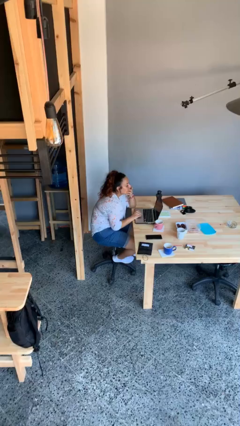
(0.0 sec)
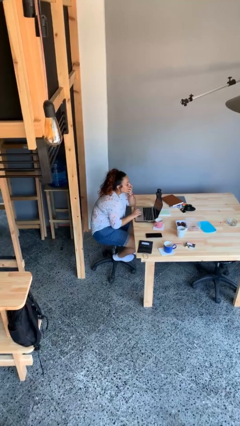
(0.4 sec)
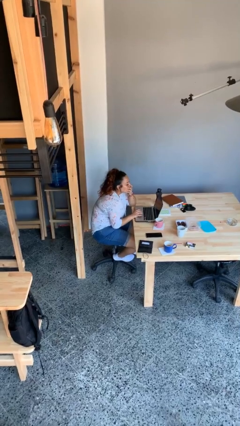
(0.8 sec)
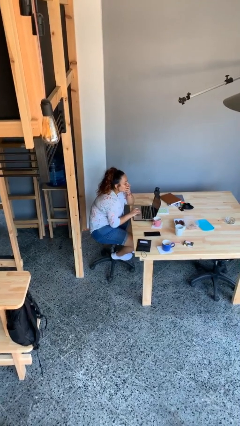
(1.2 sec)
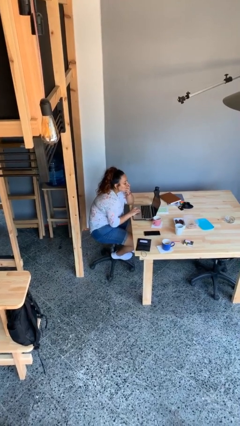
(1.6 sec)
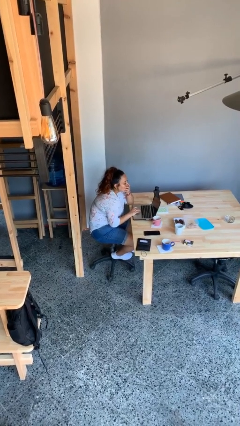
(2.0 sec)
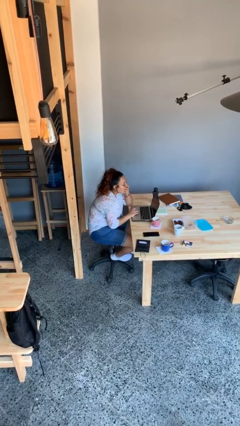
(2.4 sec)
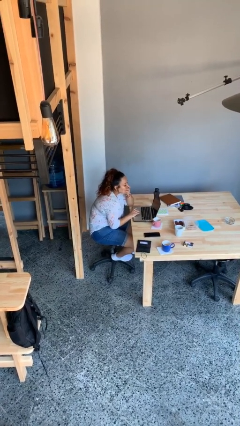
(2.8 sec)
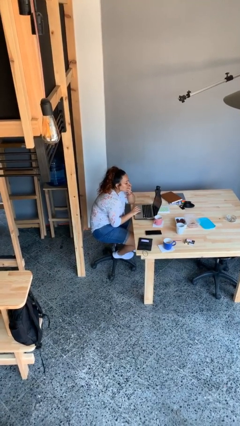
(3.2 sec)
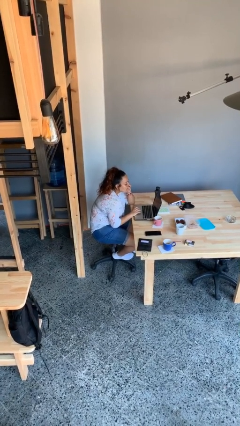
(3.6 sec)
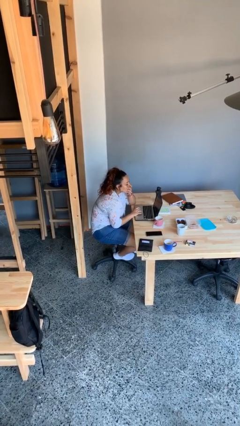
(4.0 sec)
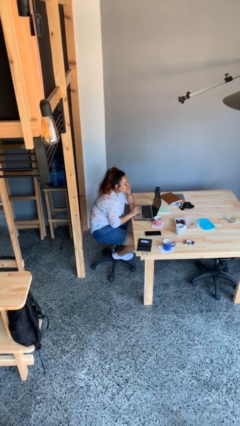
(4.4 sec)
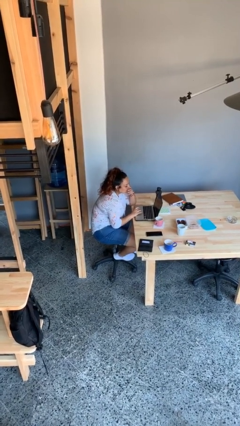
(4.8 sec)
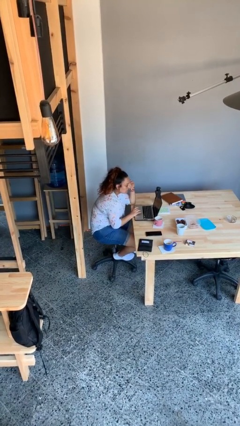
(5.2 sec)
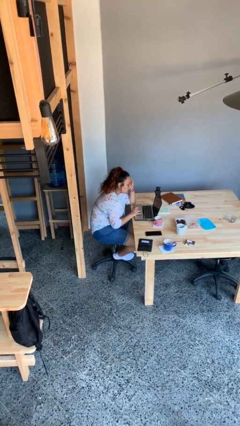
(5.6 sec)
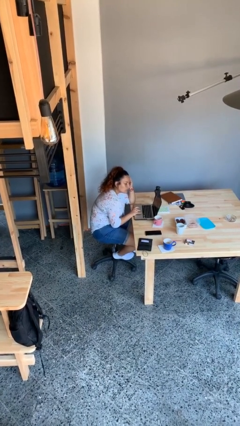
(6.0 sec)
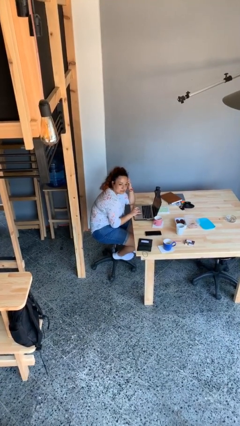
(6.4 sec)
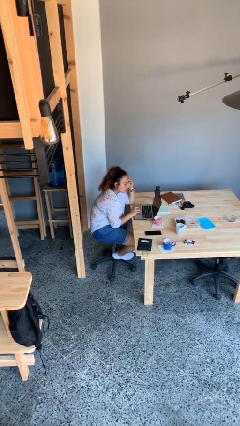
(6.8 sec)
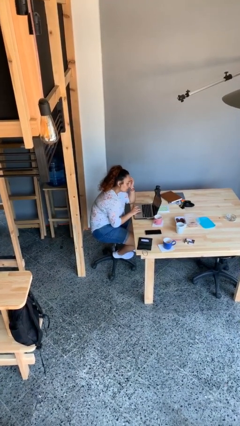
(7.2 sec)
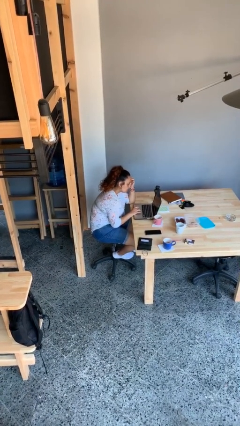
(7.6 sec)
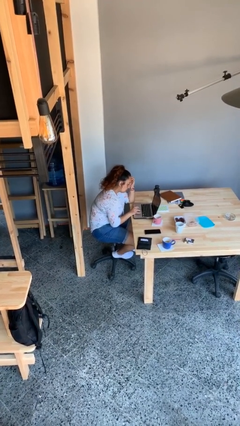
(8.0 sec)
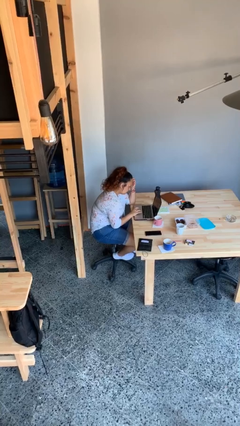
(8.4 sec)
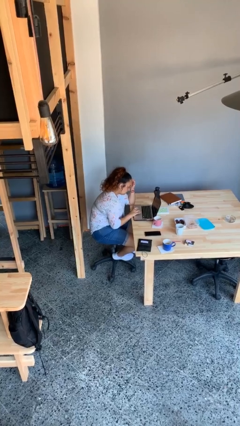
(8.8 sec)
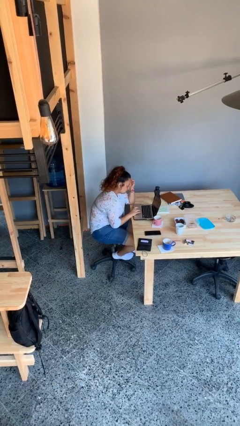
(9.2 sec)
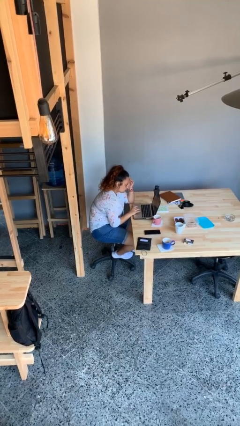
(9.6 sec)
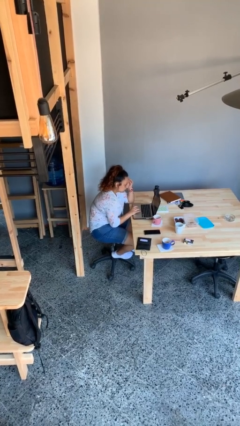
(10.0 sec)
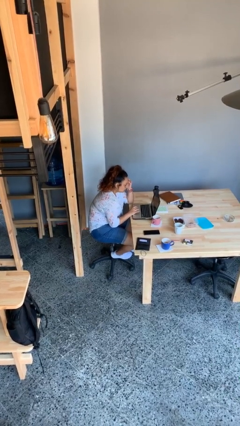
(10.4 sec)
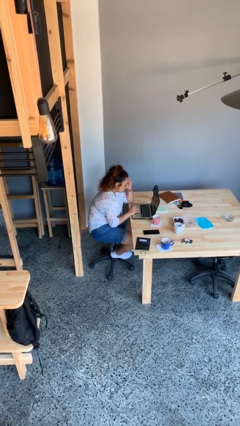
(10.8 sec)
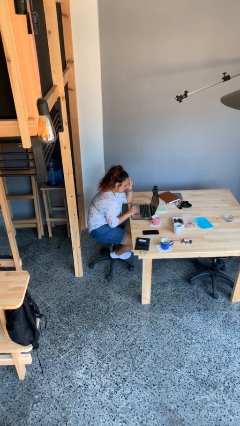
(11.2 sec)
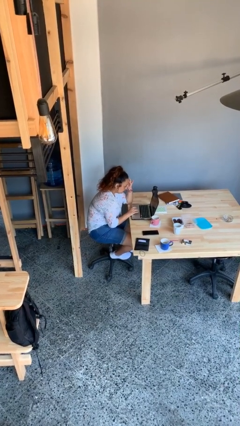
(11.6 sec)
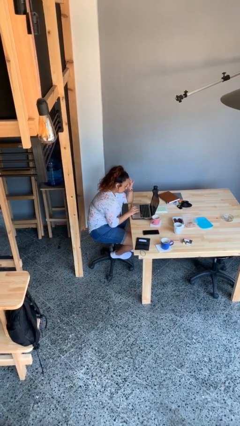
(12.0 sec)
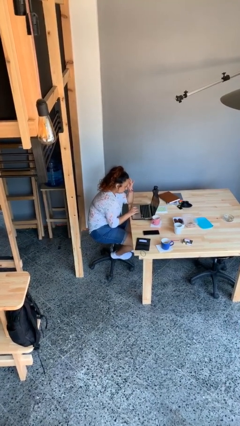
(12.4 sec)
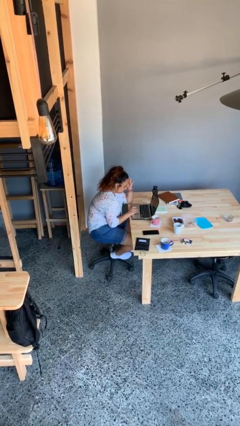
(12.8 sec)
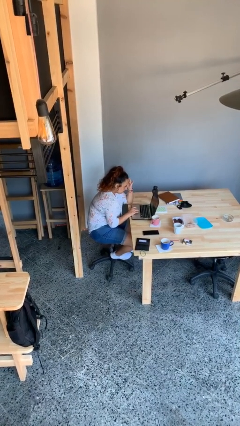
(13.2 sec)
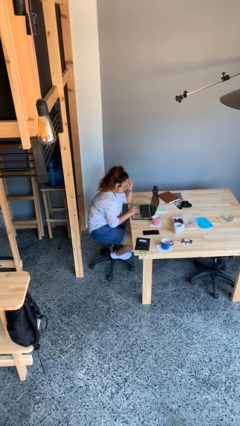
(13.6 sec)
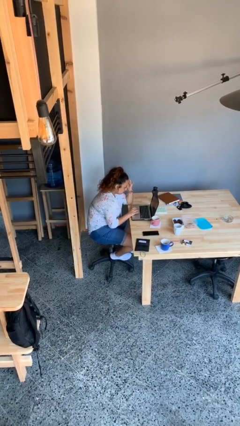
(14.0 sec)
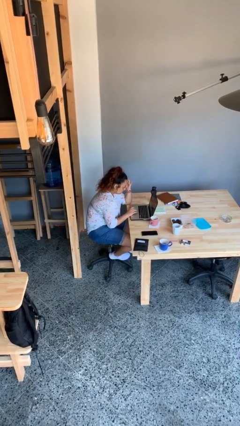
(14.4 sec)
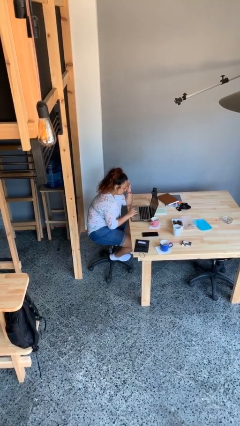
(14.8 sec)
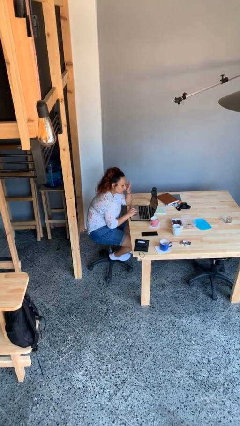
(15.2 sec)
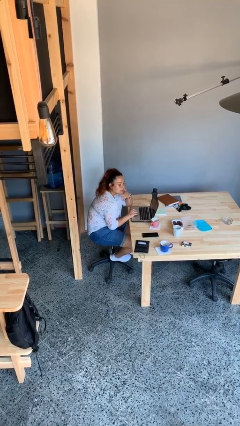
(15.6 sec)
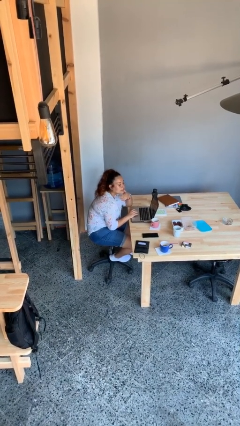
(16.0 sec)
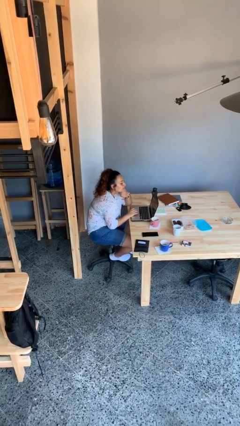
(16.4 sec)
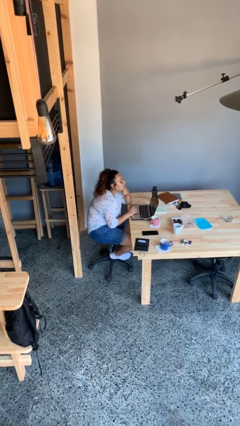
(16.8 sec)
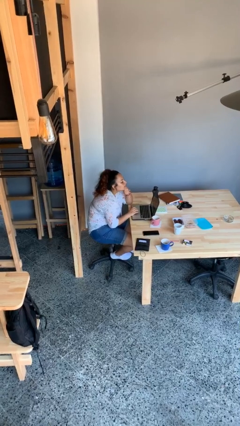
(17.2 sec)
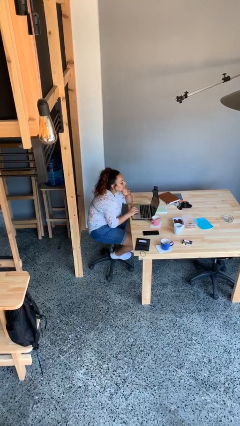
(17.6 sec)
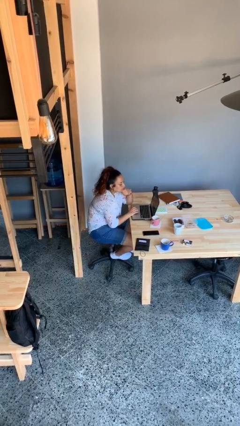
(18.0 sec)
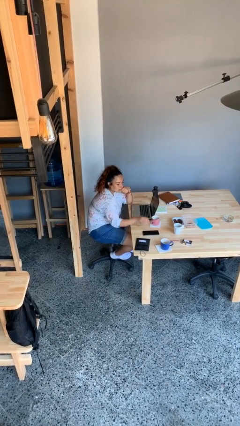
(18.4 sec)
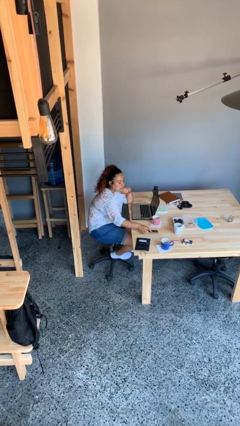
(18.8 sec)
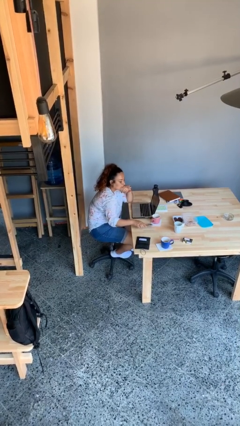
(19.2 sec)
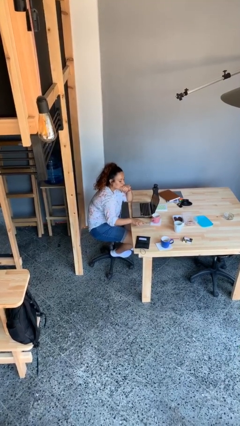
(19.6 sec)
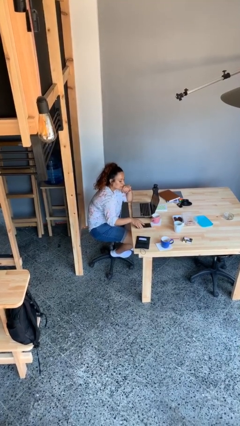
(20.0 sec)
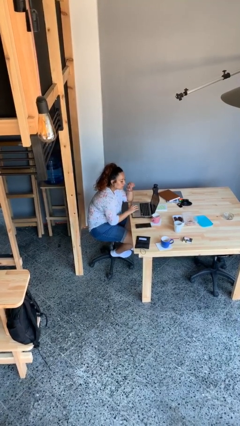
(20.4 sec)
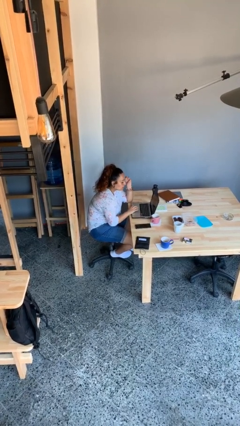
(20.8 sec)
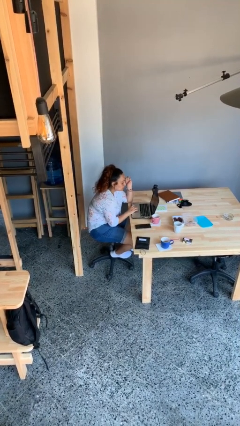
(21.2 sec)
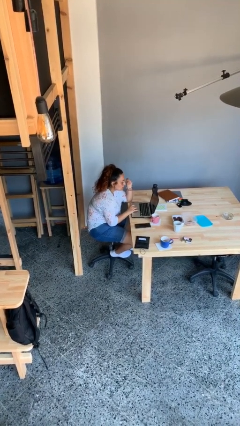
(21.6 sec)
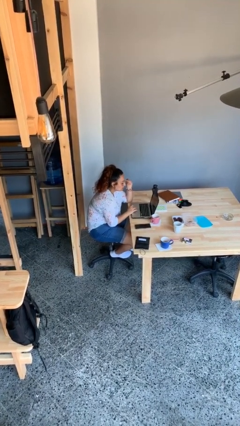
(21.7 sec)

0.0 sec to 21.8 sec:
person interacts with laptop

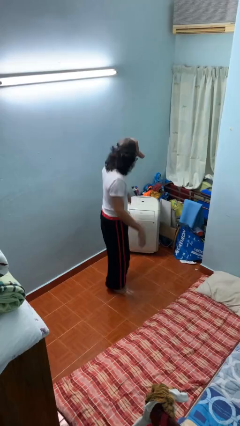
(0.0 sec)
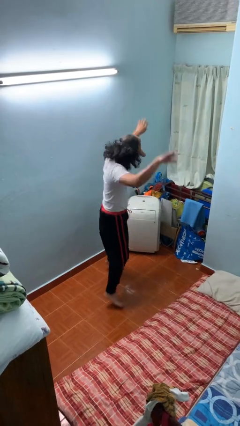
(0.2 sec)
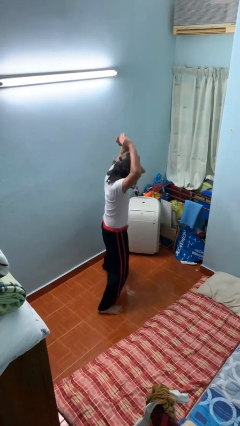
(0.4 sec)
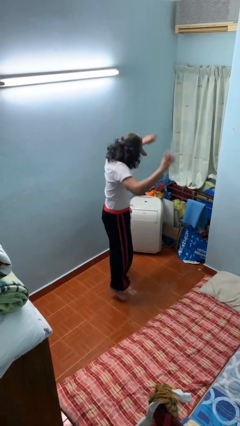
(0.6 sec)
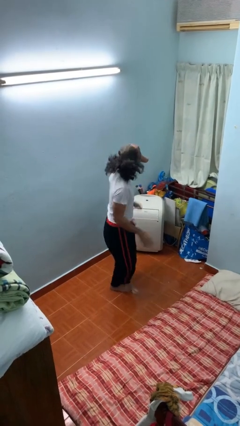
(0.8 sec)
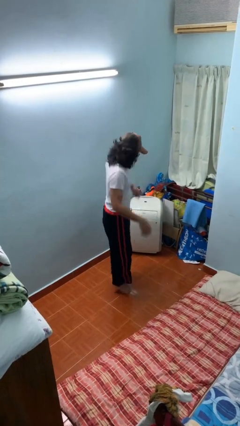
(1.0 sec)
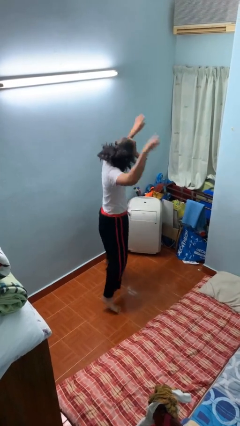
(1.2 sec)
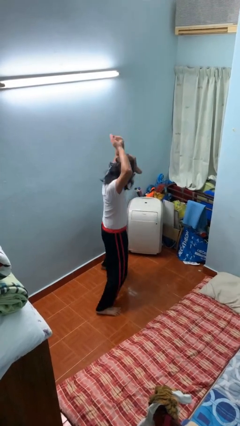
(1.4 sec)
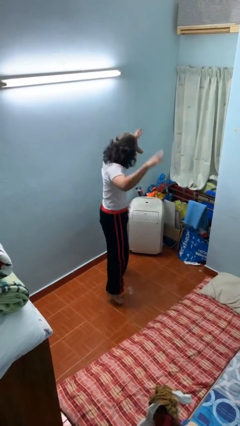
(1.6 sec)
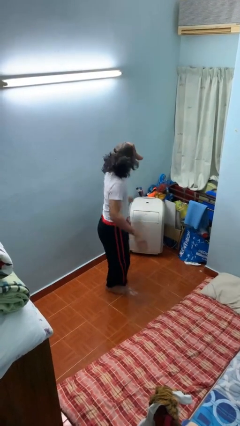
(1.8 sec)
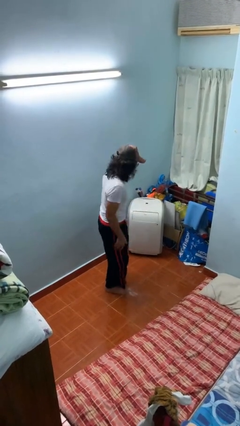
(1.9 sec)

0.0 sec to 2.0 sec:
person exercises with jumping jacks

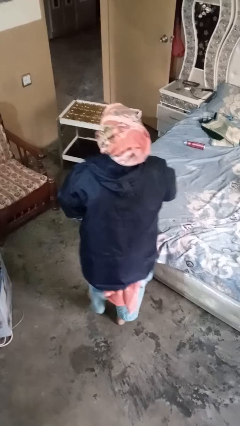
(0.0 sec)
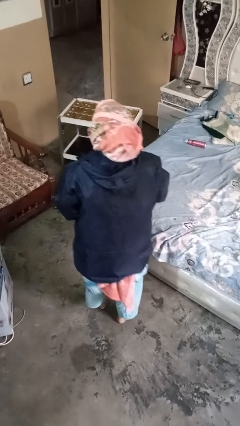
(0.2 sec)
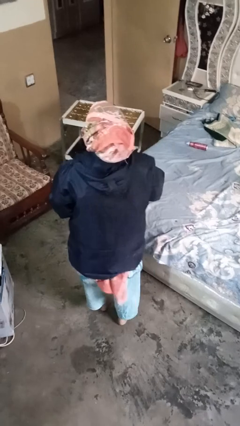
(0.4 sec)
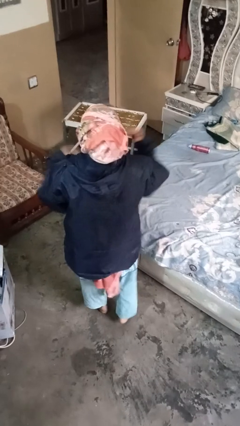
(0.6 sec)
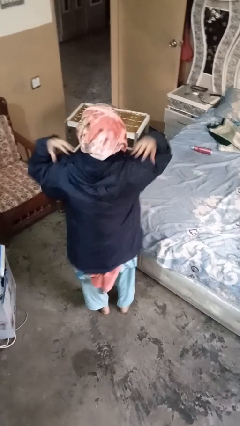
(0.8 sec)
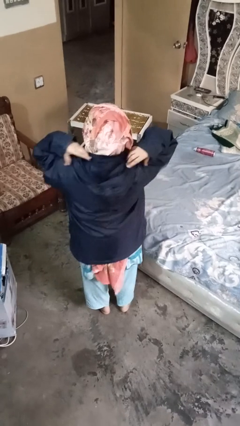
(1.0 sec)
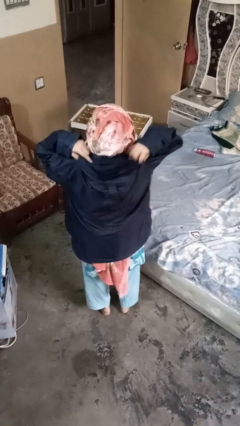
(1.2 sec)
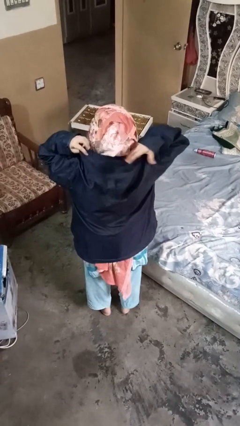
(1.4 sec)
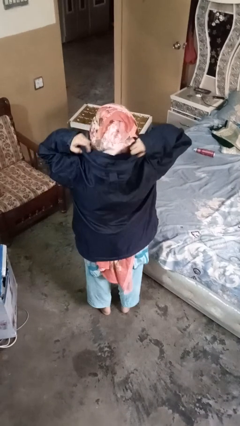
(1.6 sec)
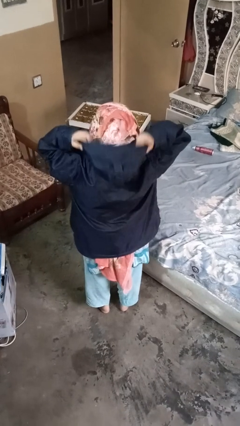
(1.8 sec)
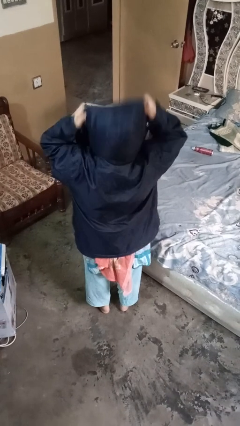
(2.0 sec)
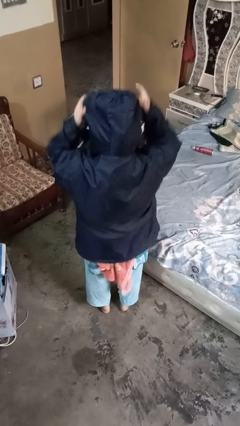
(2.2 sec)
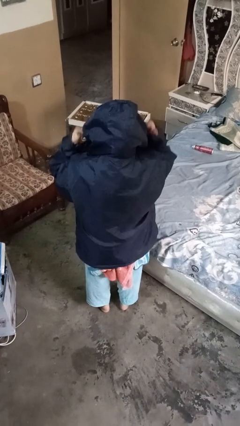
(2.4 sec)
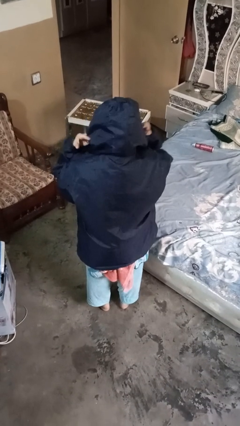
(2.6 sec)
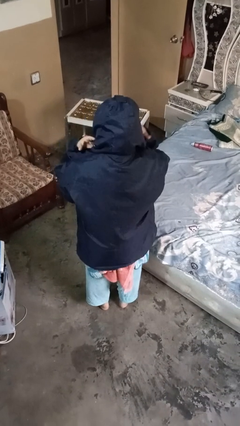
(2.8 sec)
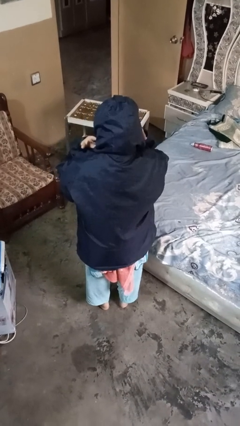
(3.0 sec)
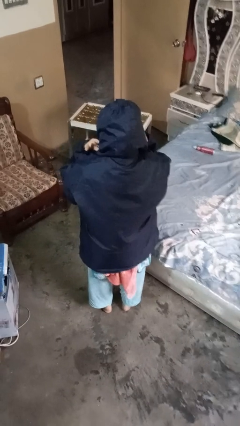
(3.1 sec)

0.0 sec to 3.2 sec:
person puts on hoodie

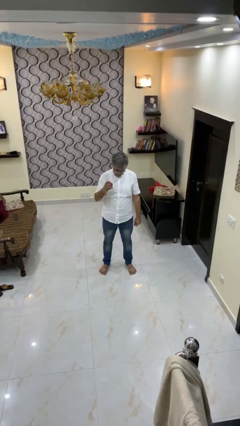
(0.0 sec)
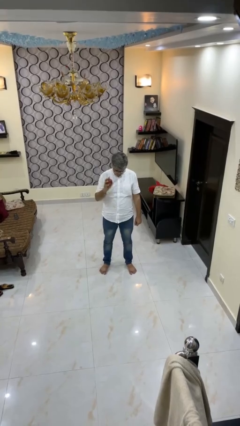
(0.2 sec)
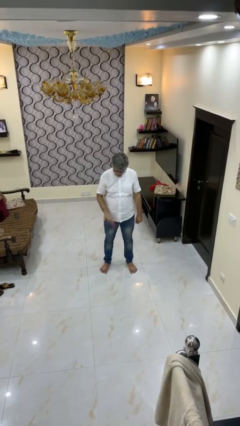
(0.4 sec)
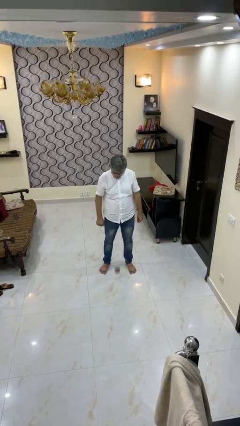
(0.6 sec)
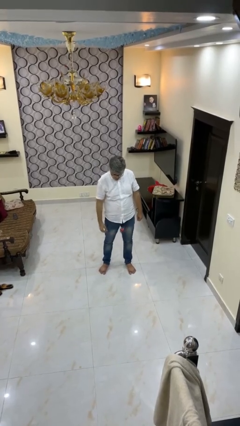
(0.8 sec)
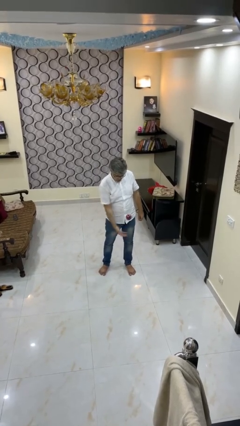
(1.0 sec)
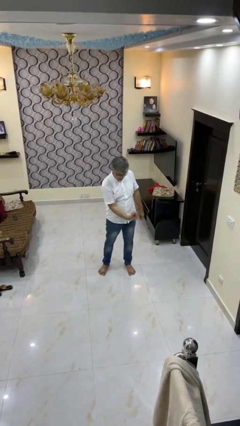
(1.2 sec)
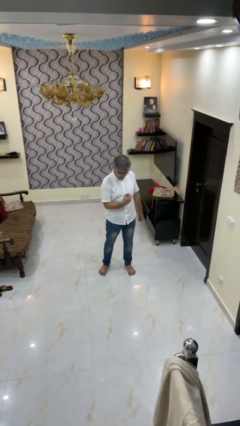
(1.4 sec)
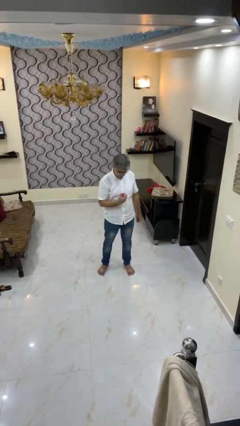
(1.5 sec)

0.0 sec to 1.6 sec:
person bounces ball on floor

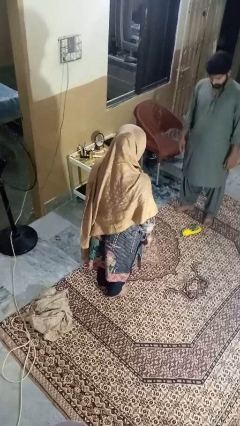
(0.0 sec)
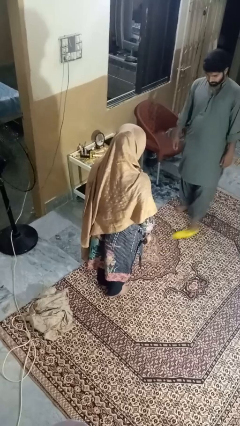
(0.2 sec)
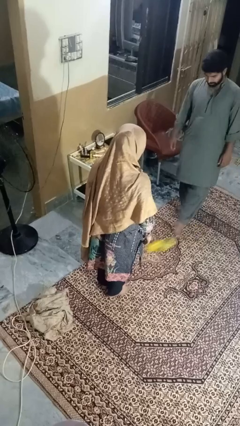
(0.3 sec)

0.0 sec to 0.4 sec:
person kicks object to person
